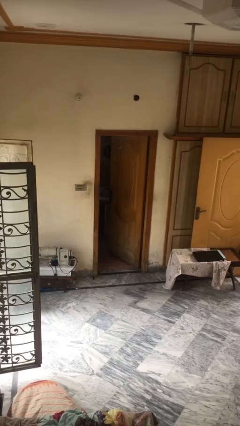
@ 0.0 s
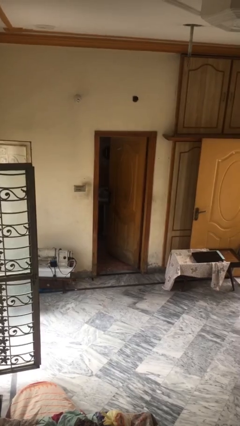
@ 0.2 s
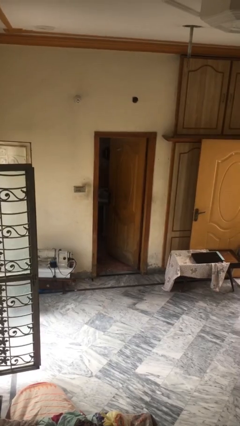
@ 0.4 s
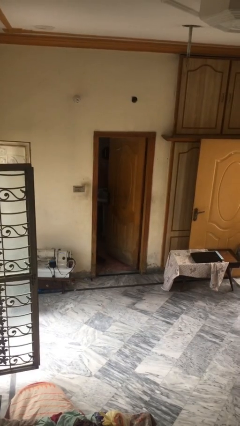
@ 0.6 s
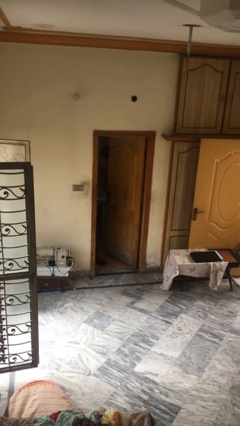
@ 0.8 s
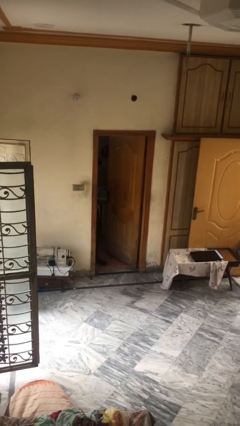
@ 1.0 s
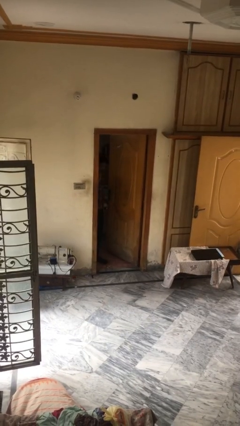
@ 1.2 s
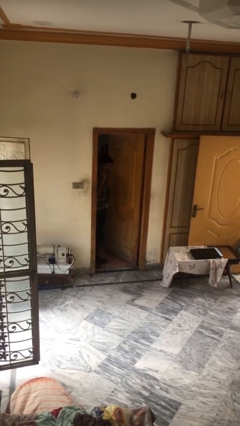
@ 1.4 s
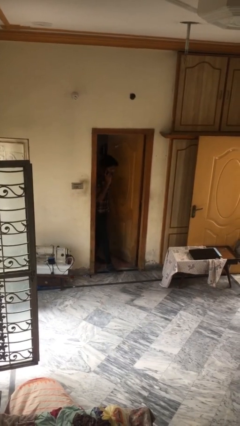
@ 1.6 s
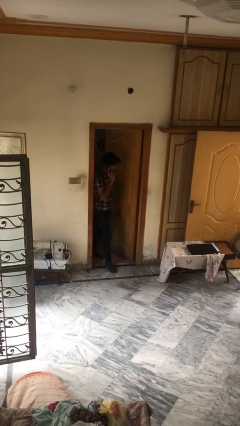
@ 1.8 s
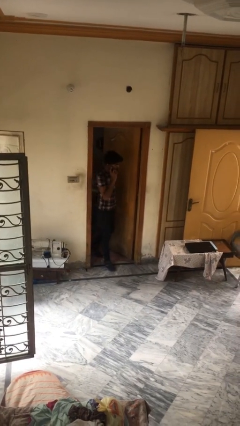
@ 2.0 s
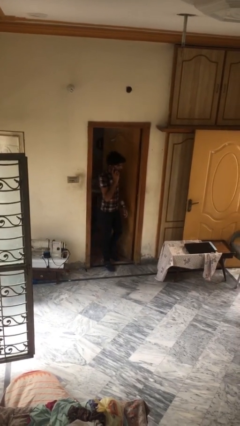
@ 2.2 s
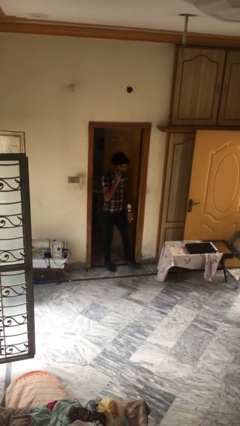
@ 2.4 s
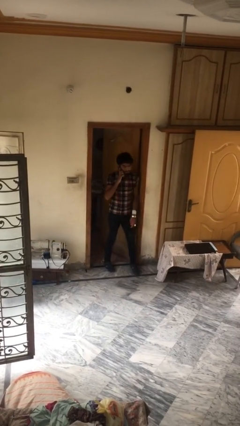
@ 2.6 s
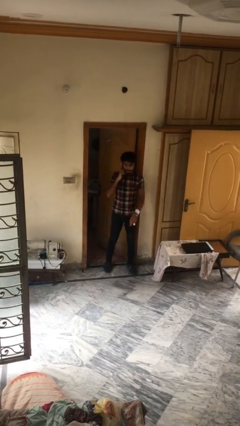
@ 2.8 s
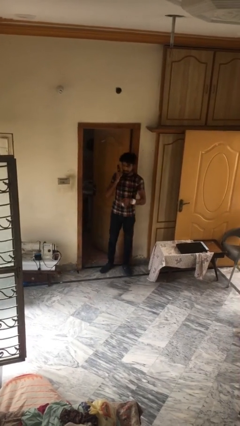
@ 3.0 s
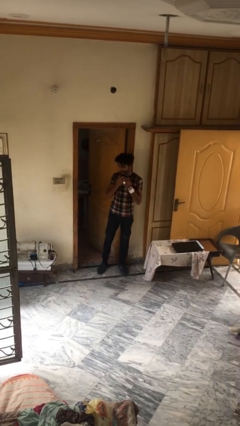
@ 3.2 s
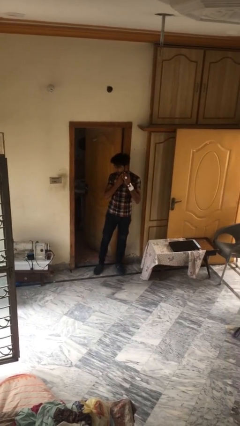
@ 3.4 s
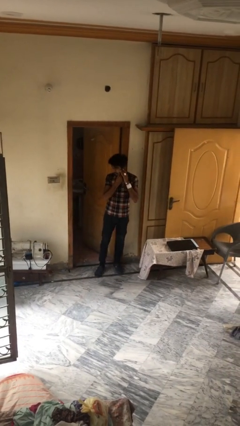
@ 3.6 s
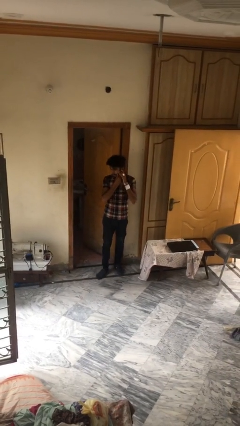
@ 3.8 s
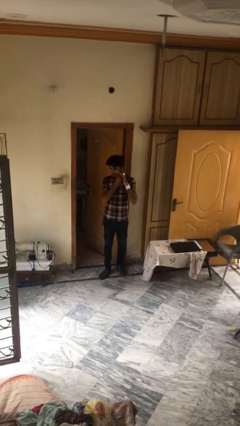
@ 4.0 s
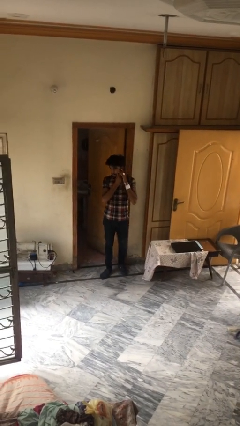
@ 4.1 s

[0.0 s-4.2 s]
person enters scene through structure

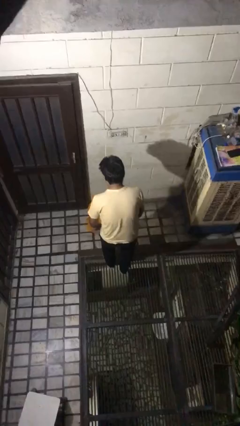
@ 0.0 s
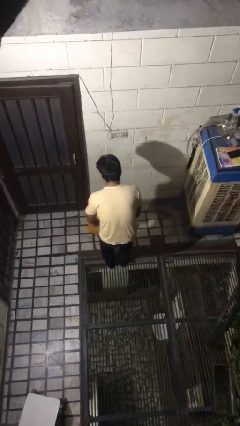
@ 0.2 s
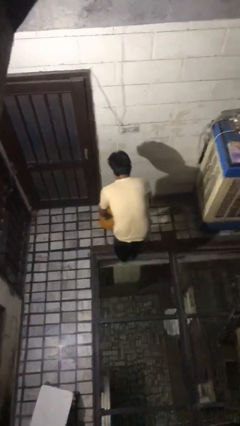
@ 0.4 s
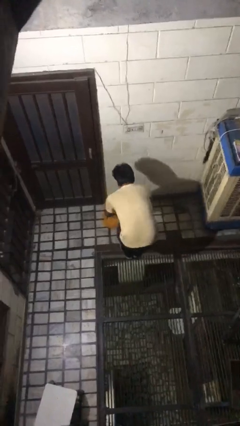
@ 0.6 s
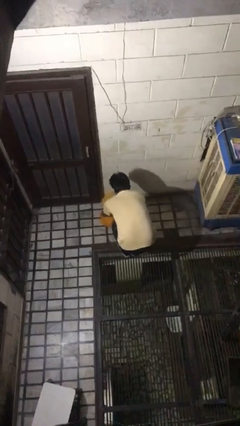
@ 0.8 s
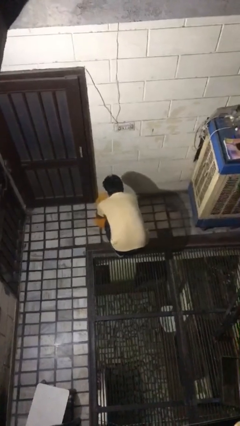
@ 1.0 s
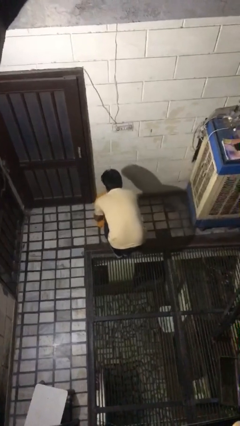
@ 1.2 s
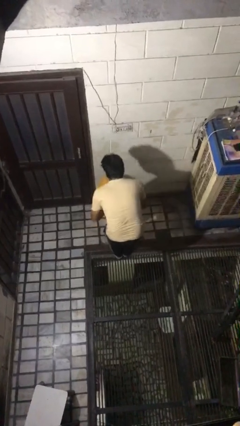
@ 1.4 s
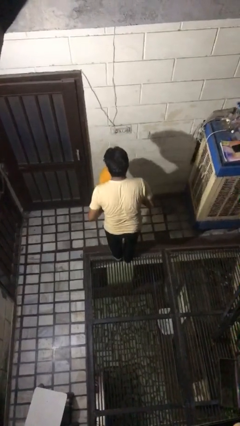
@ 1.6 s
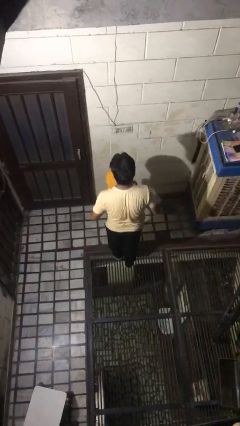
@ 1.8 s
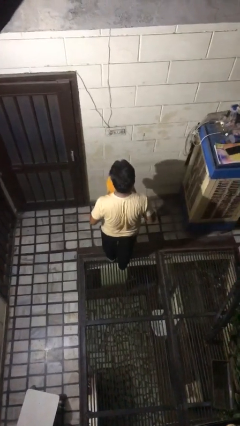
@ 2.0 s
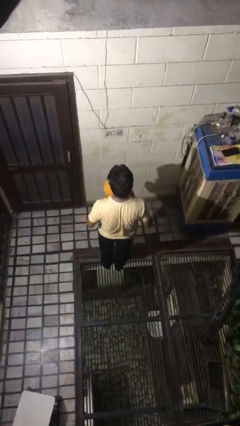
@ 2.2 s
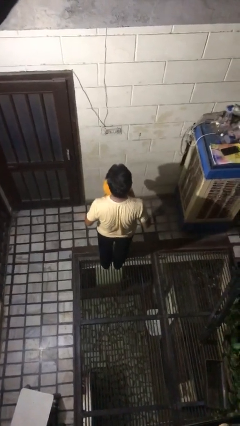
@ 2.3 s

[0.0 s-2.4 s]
person picks up object from floor

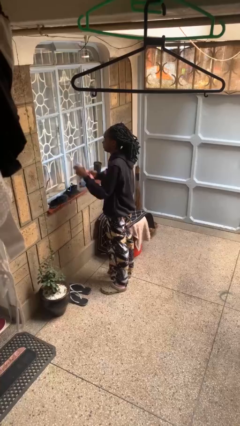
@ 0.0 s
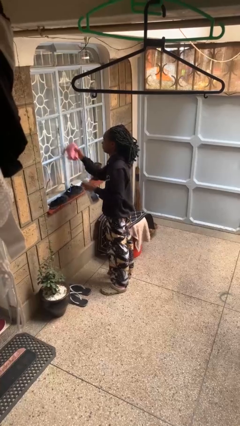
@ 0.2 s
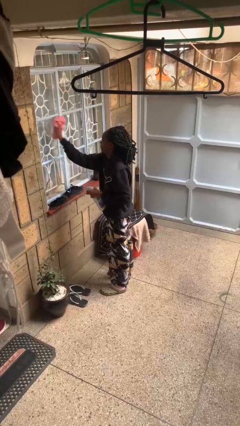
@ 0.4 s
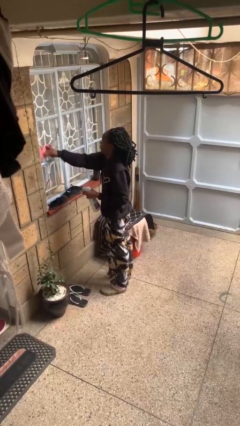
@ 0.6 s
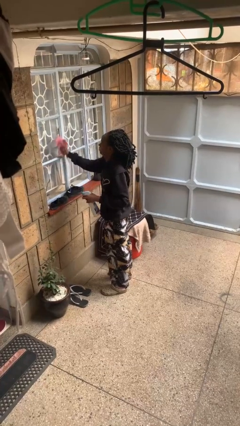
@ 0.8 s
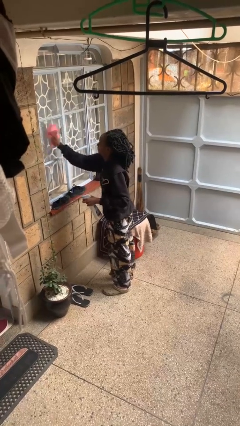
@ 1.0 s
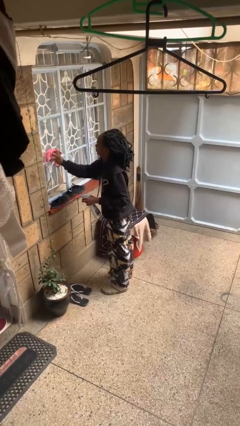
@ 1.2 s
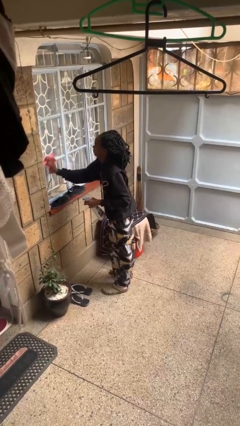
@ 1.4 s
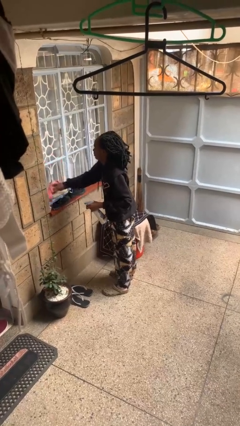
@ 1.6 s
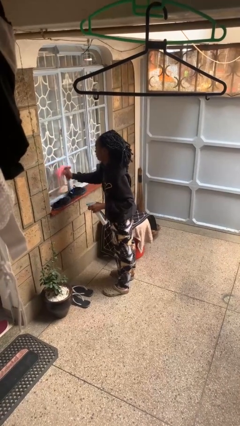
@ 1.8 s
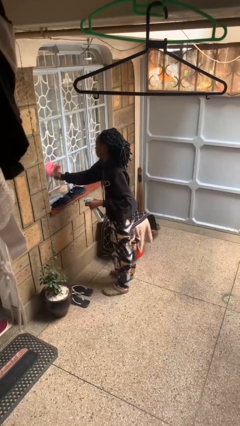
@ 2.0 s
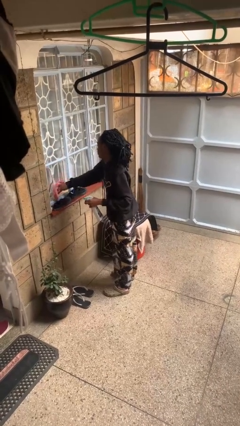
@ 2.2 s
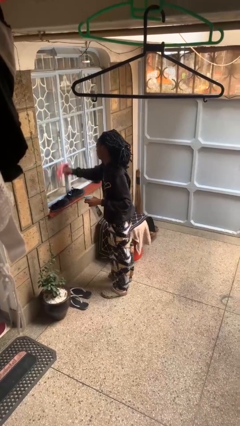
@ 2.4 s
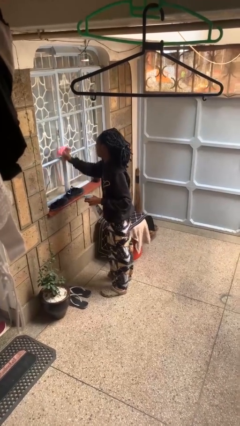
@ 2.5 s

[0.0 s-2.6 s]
person washes window

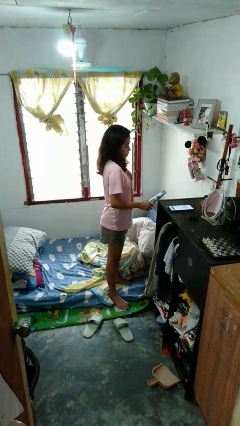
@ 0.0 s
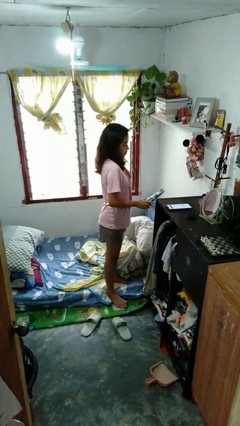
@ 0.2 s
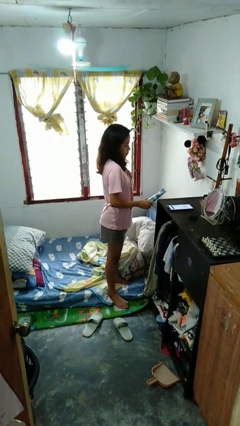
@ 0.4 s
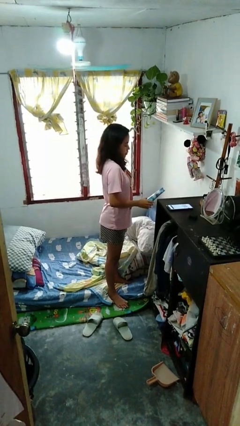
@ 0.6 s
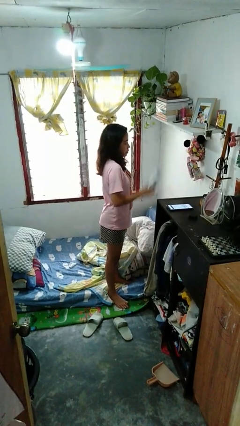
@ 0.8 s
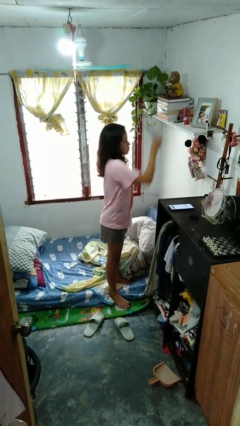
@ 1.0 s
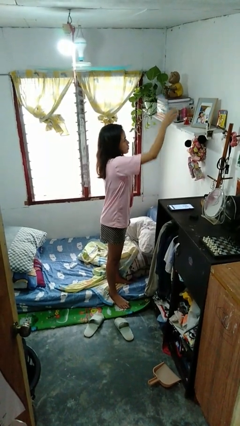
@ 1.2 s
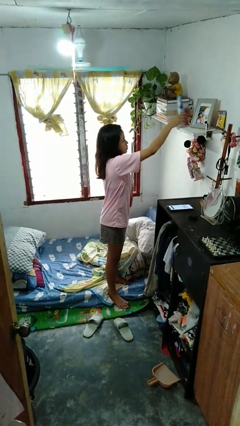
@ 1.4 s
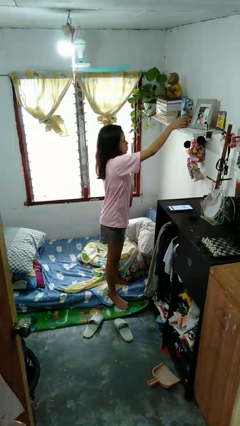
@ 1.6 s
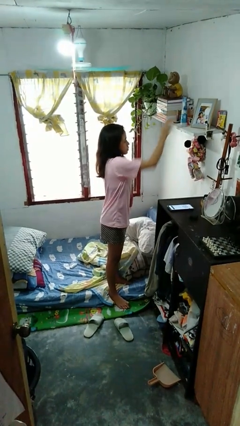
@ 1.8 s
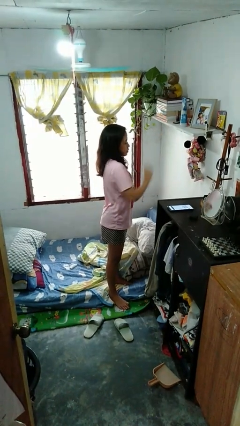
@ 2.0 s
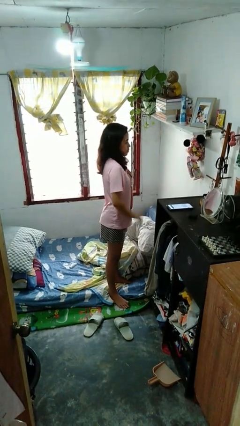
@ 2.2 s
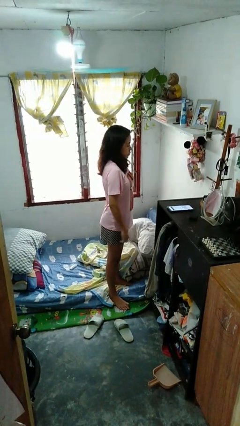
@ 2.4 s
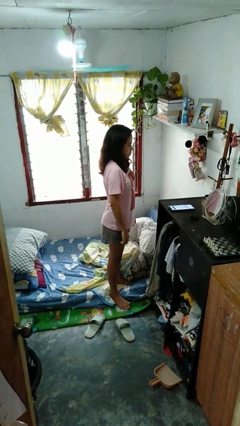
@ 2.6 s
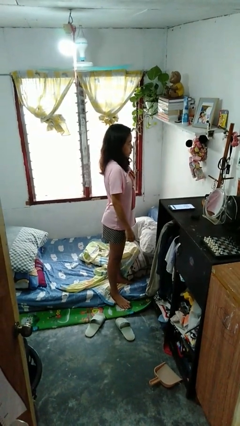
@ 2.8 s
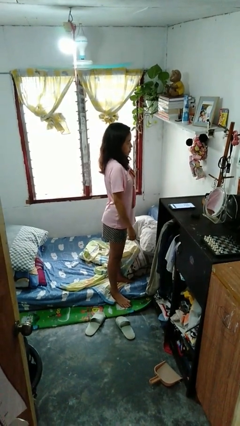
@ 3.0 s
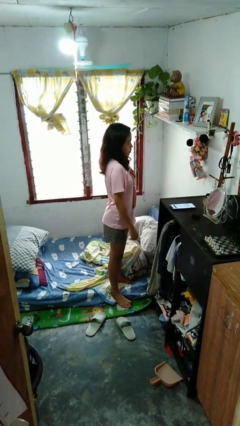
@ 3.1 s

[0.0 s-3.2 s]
person applies foundation makeup

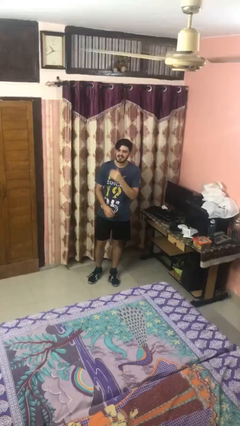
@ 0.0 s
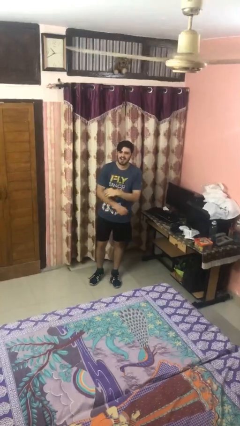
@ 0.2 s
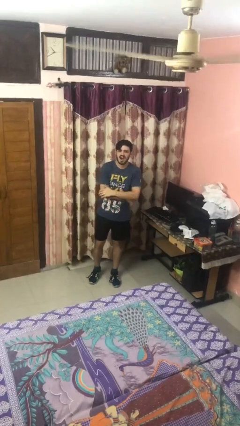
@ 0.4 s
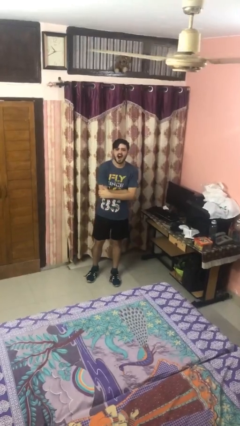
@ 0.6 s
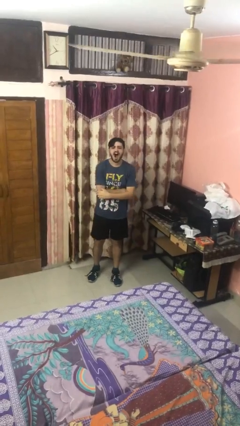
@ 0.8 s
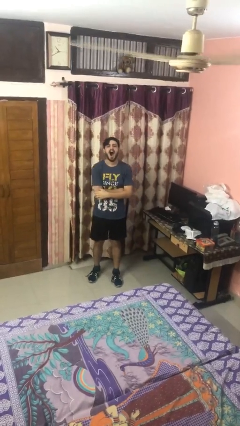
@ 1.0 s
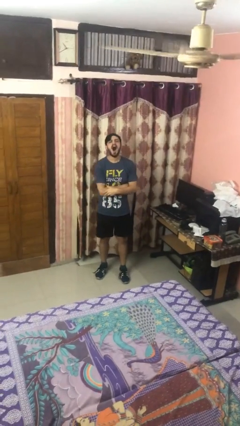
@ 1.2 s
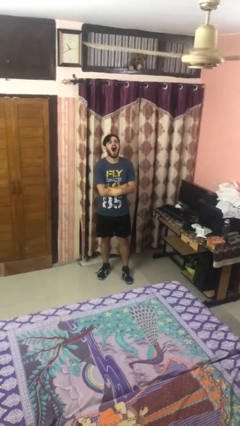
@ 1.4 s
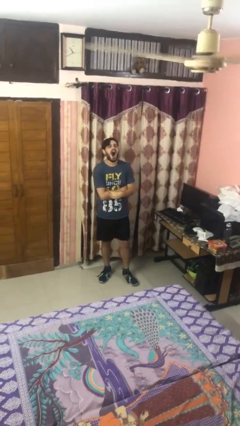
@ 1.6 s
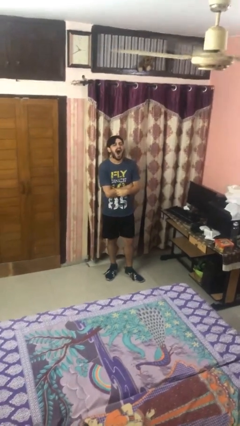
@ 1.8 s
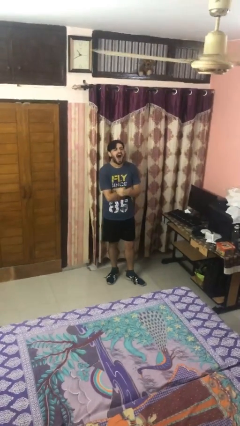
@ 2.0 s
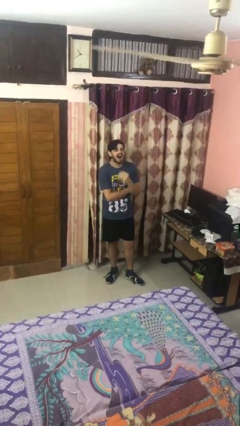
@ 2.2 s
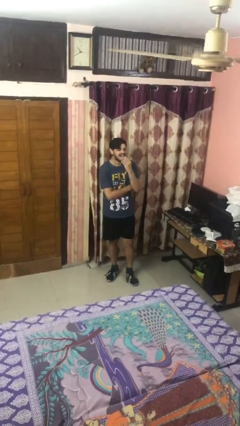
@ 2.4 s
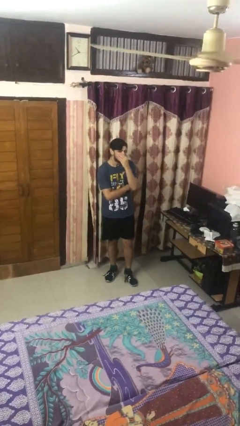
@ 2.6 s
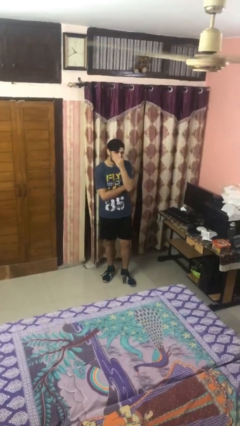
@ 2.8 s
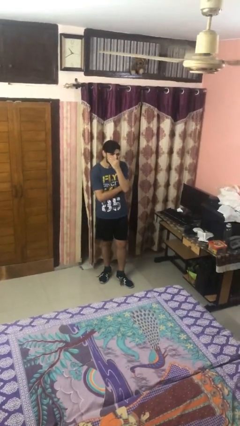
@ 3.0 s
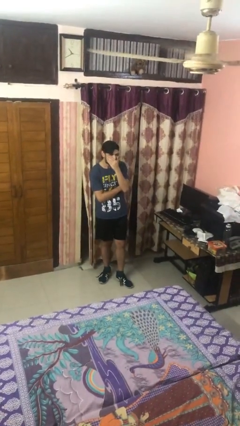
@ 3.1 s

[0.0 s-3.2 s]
person yawns

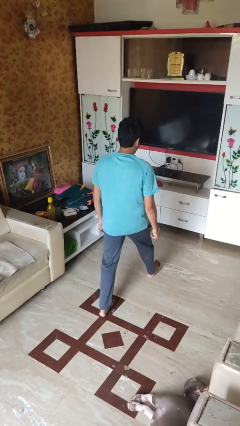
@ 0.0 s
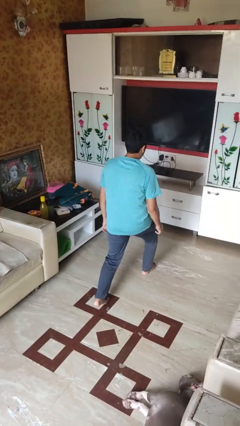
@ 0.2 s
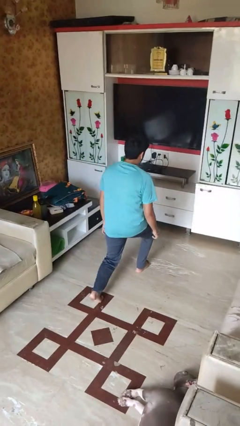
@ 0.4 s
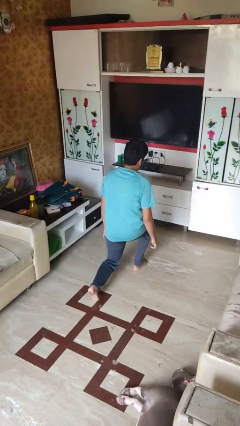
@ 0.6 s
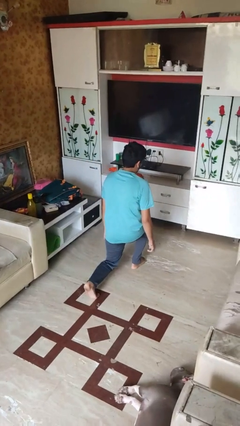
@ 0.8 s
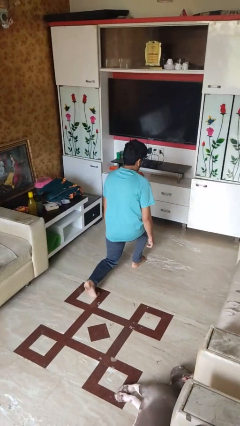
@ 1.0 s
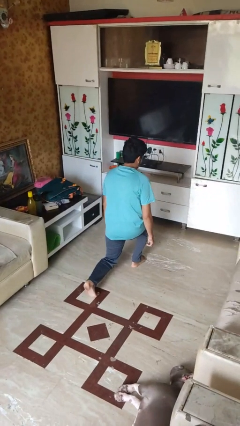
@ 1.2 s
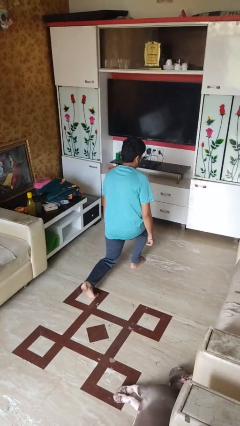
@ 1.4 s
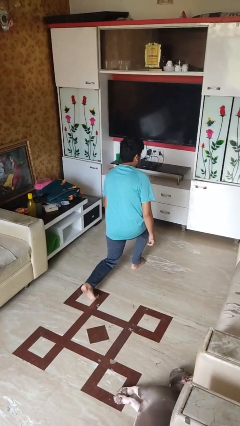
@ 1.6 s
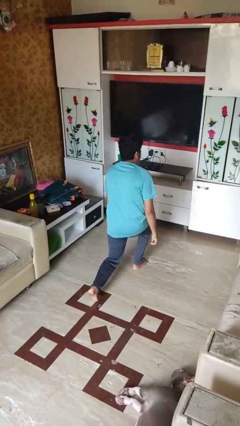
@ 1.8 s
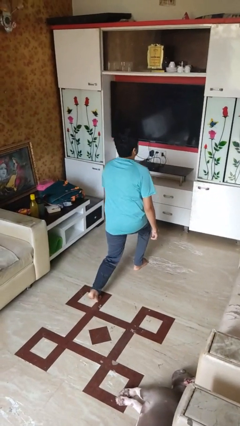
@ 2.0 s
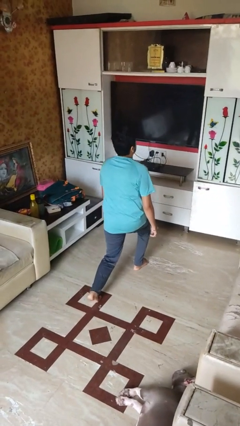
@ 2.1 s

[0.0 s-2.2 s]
person exercises with lunges
